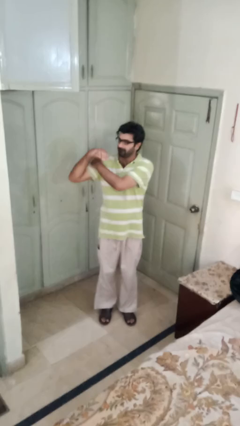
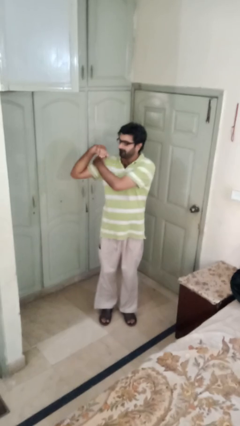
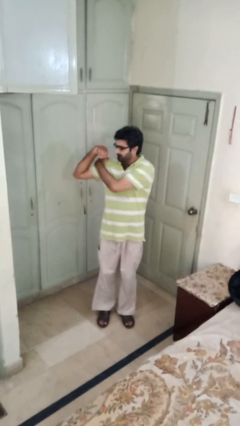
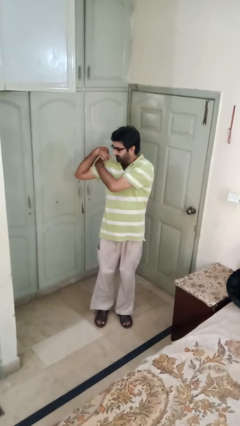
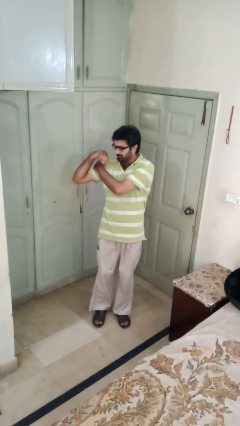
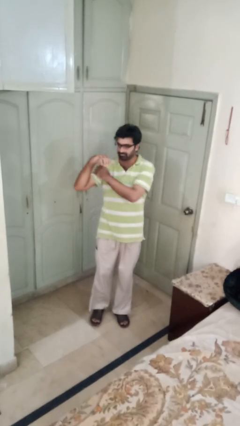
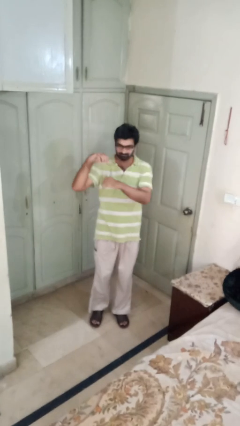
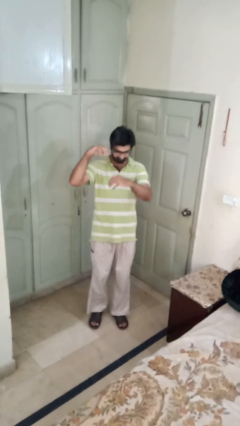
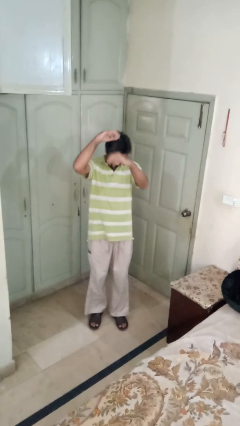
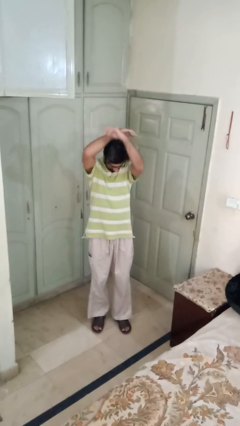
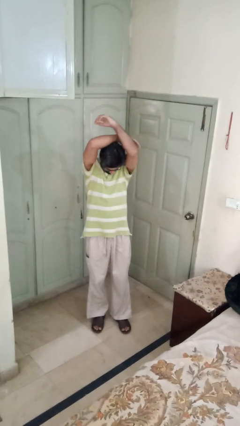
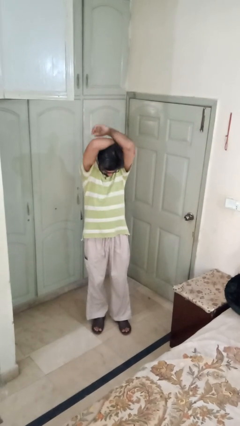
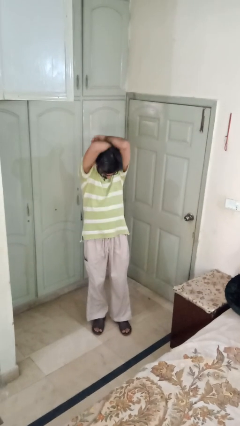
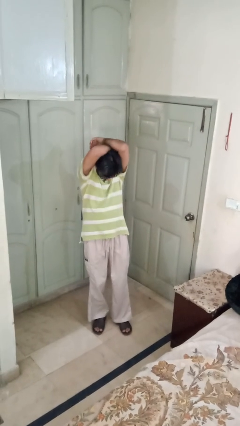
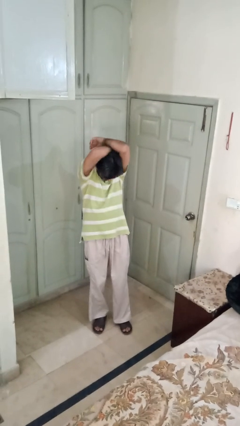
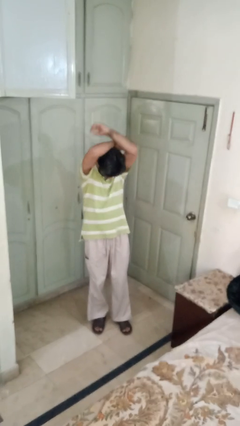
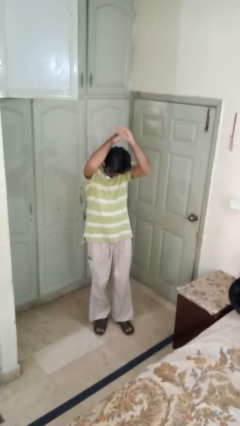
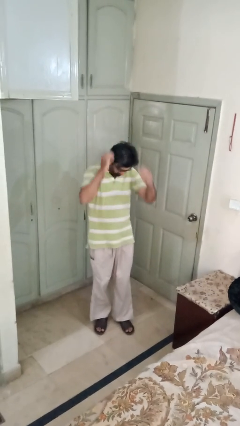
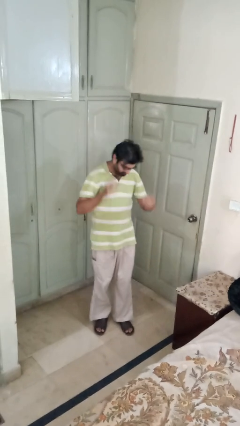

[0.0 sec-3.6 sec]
person stretches arms over head

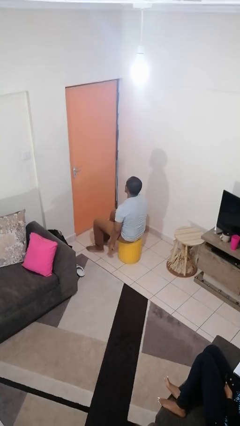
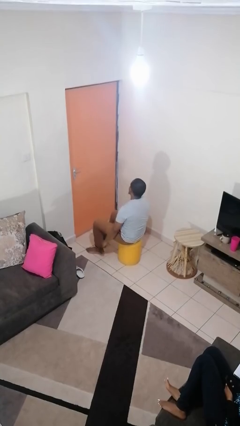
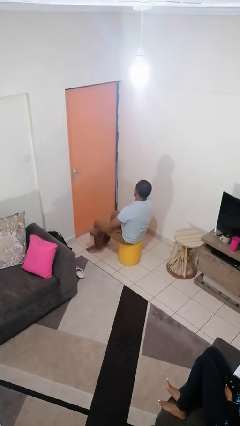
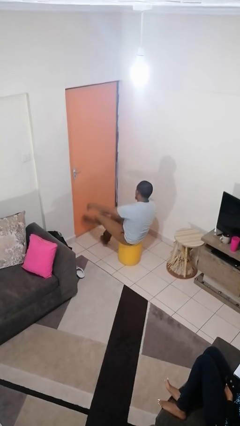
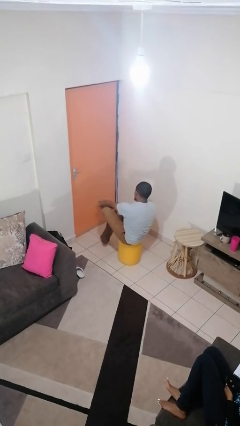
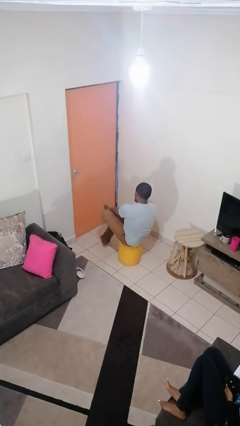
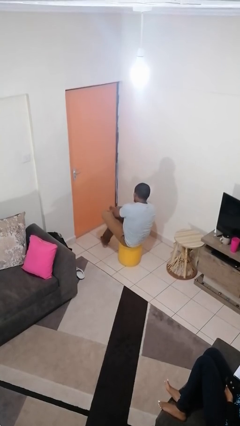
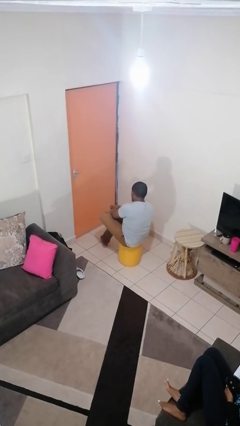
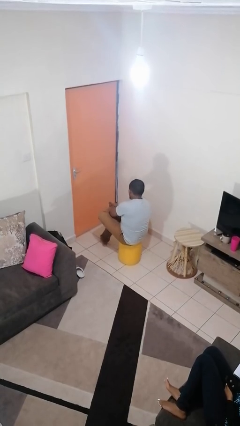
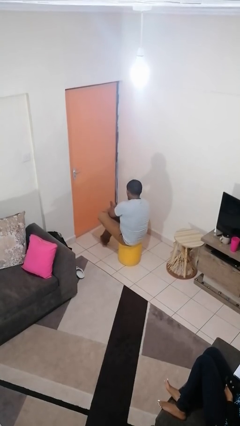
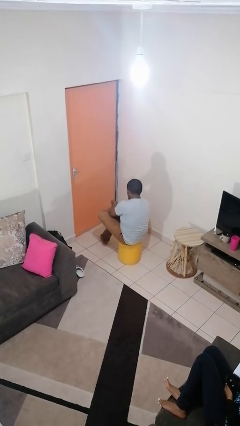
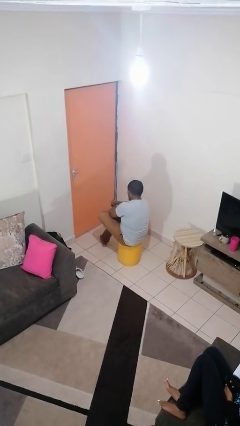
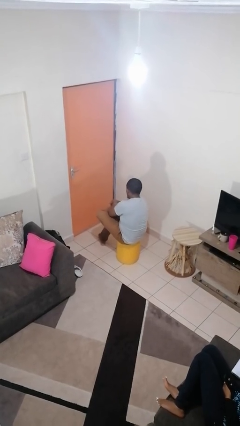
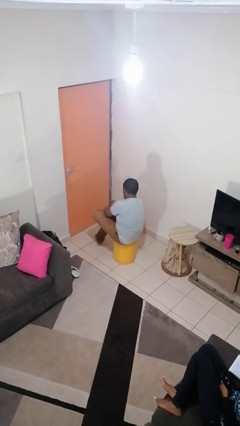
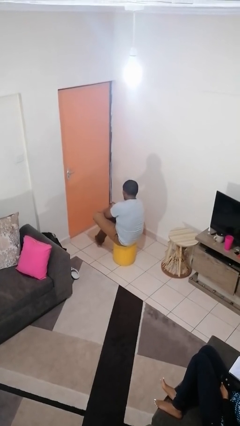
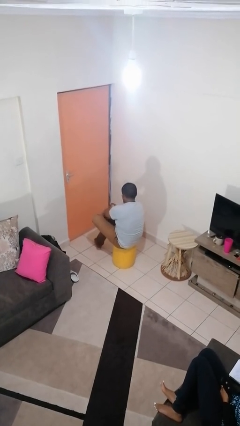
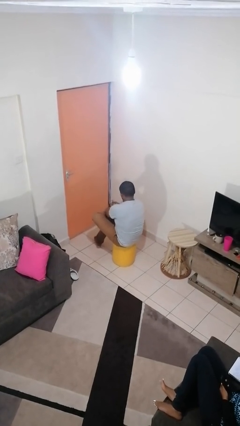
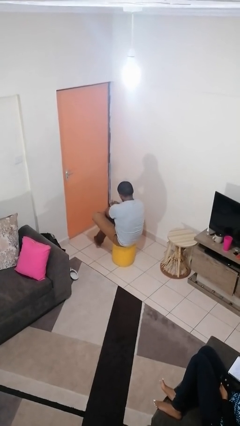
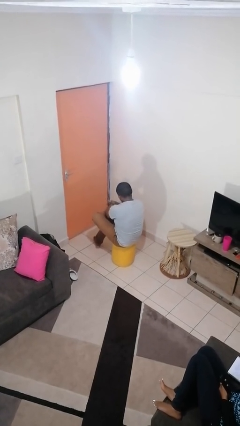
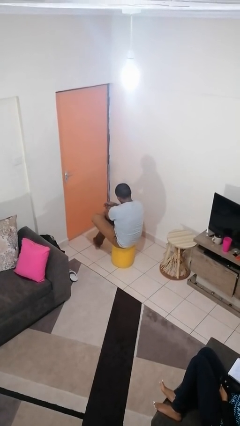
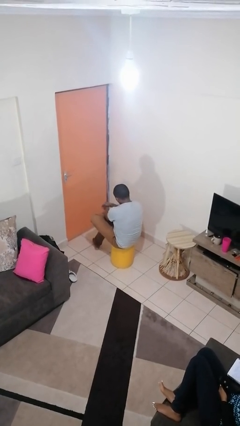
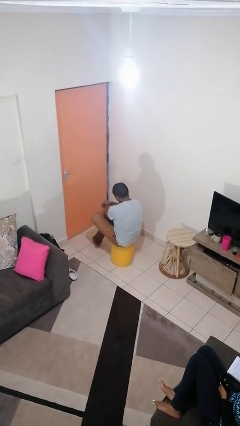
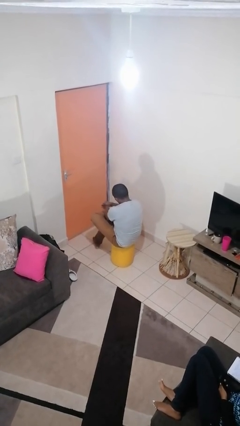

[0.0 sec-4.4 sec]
person rubs foot

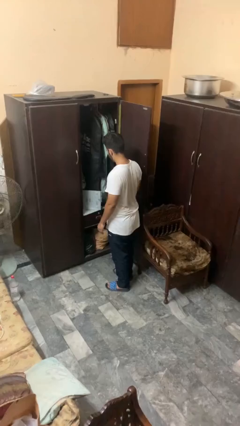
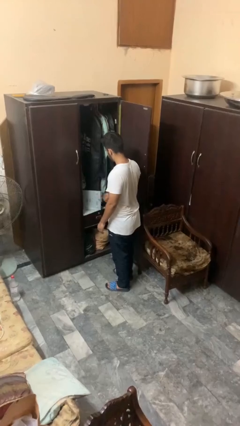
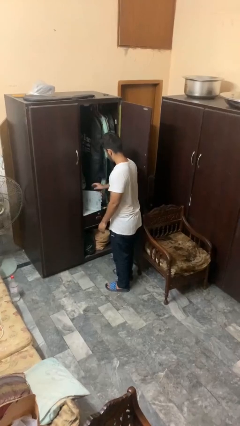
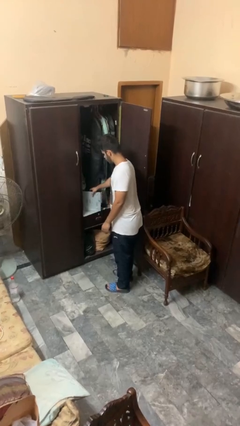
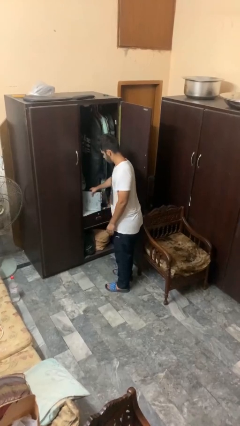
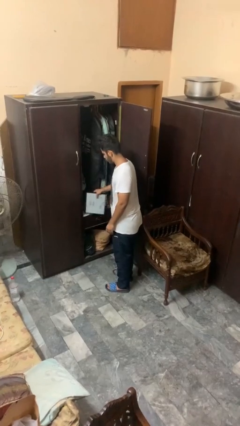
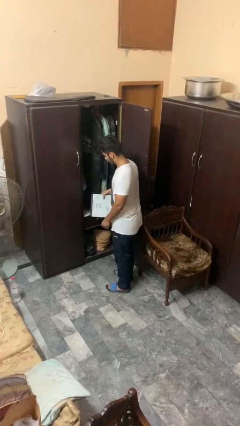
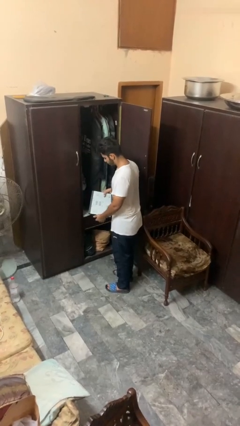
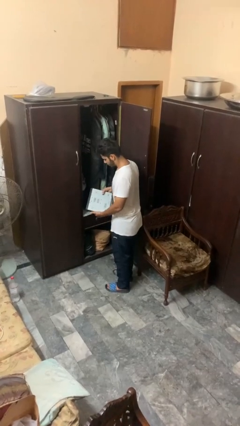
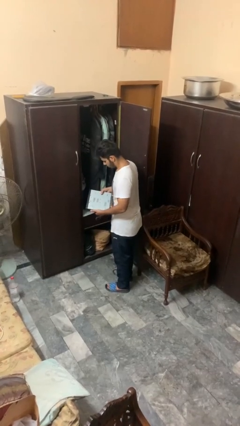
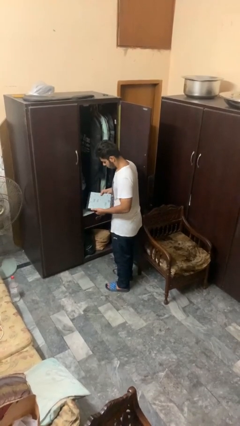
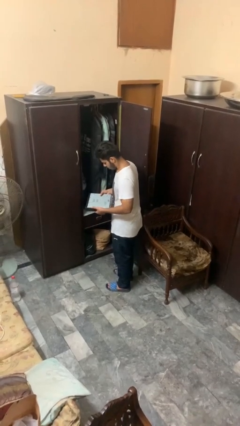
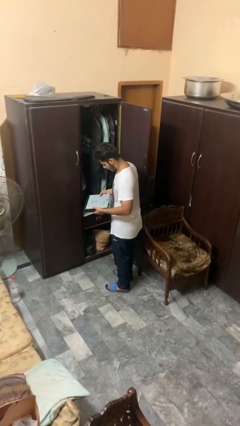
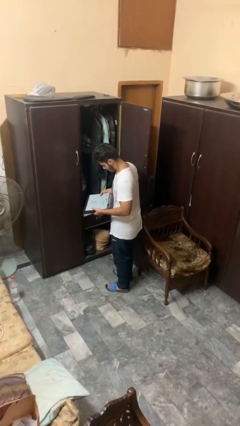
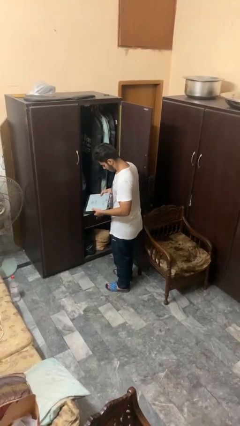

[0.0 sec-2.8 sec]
person picks up object from cabinet

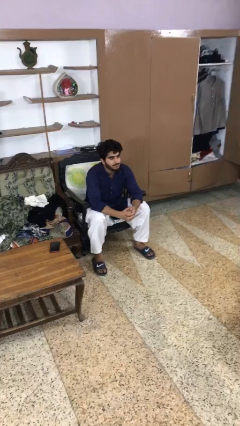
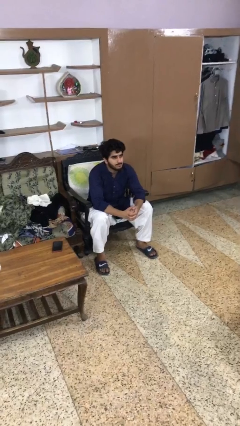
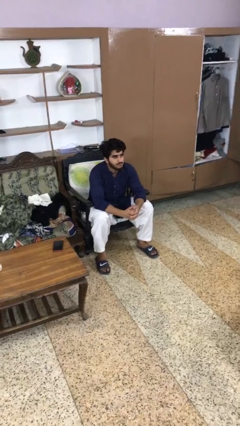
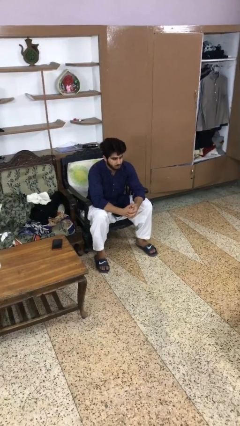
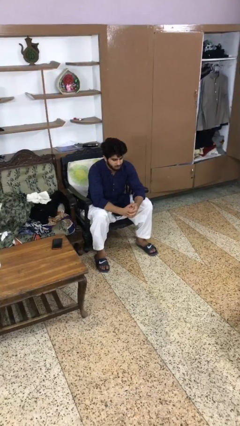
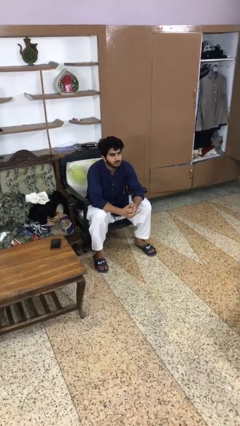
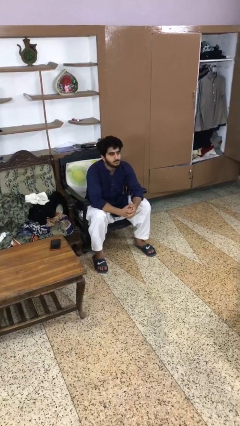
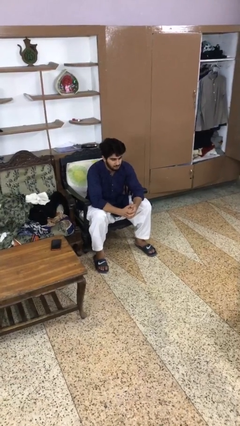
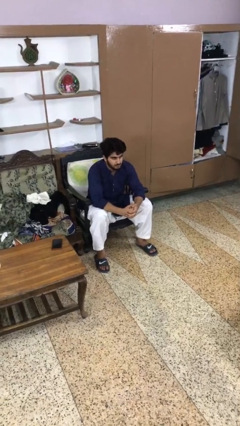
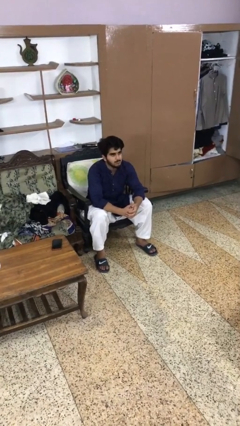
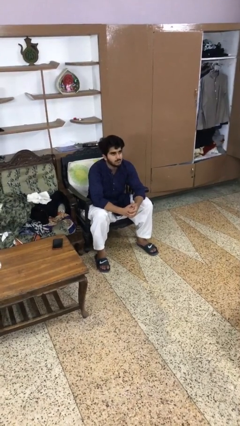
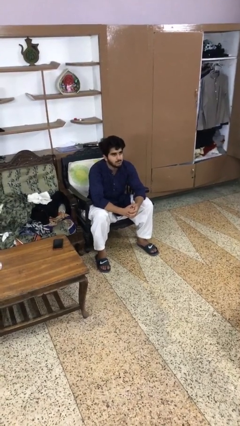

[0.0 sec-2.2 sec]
person nods head

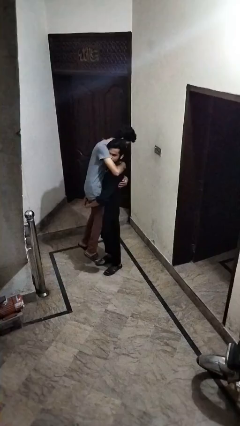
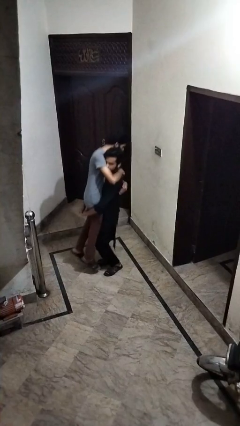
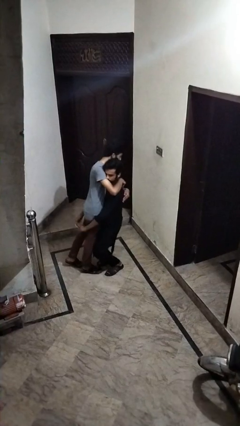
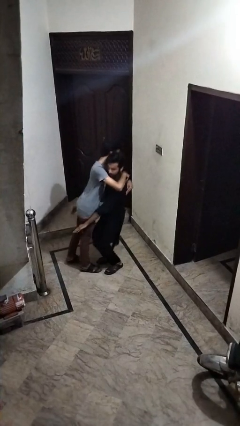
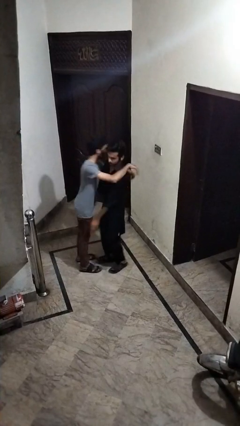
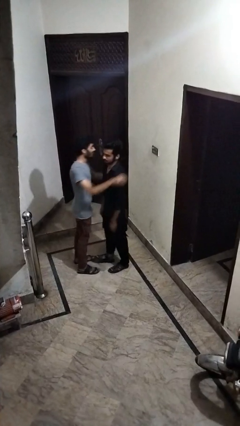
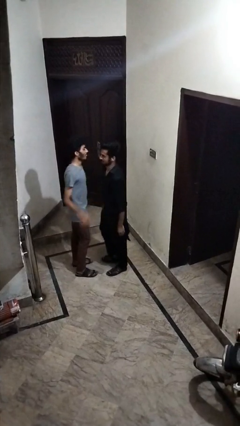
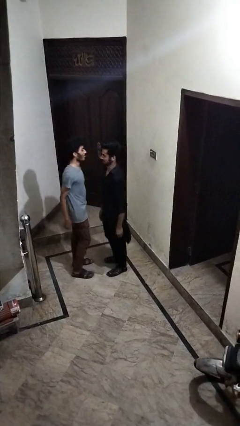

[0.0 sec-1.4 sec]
person puts down person

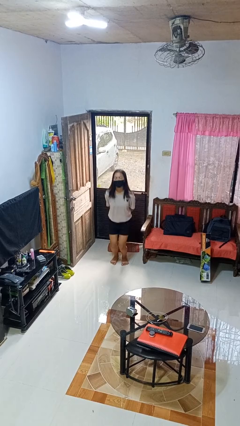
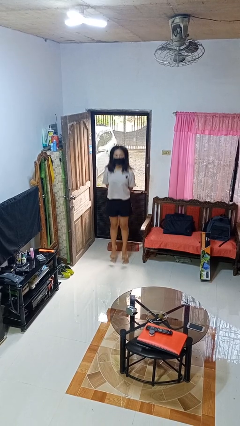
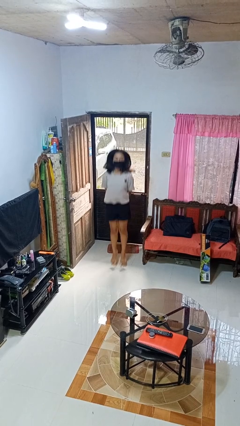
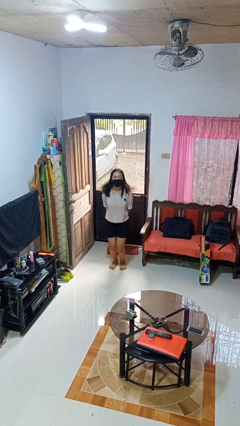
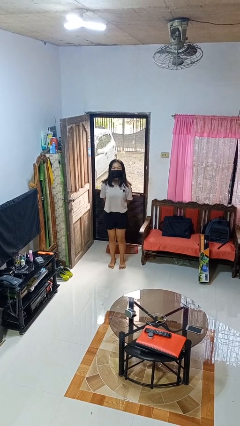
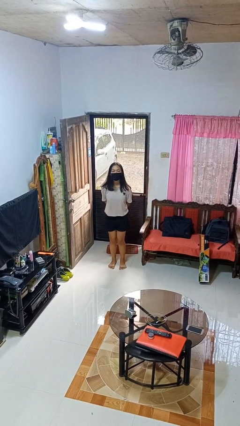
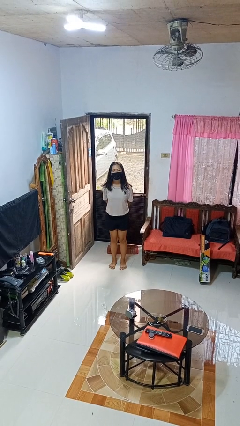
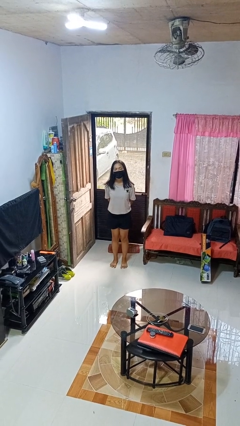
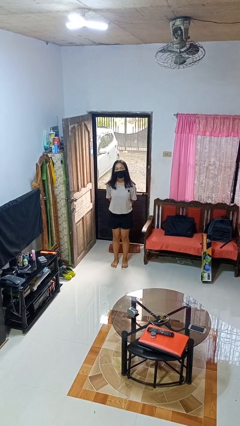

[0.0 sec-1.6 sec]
person jumps

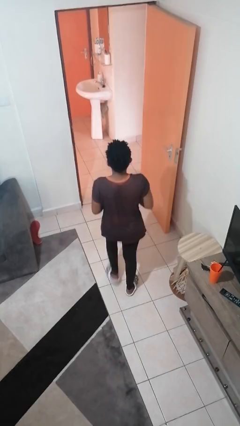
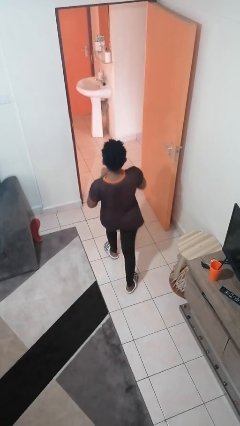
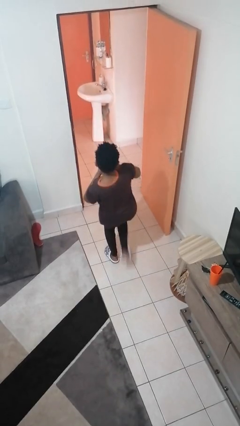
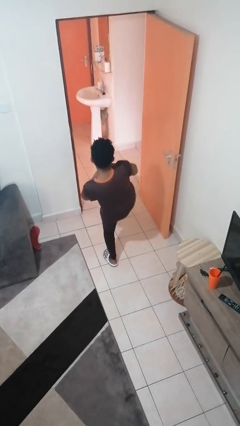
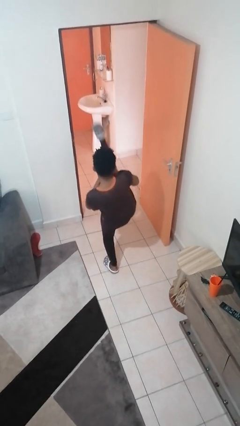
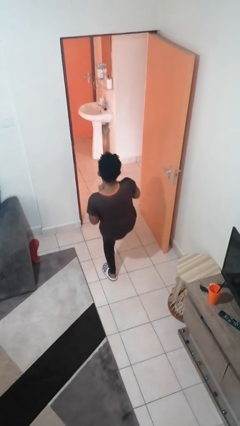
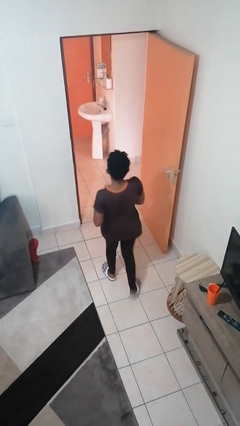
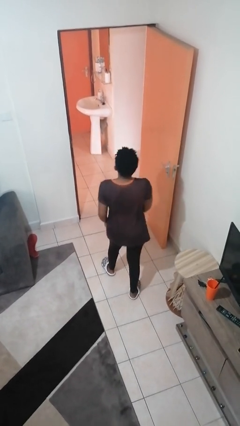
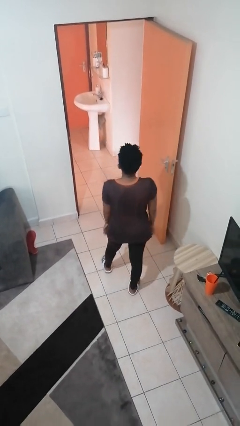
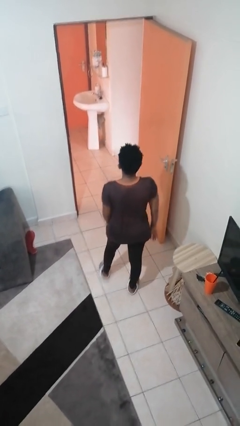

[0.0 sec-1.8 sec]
person karate kicks
